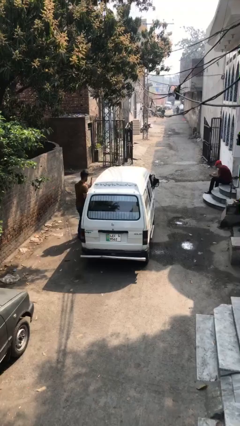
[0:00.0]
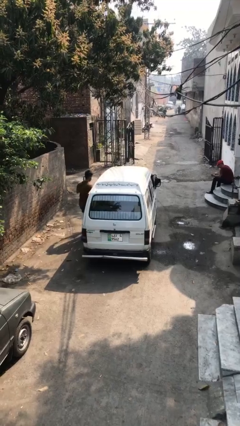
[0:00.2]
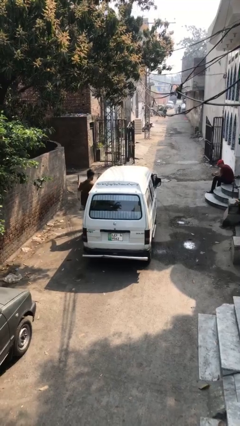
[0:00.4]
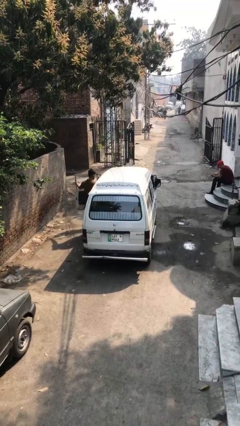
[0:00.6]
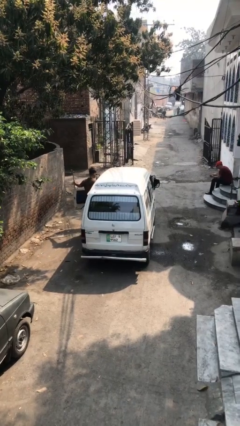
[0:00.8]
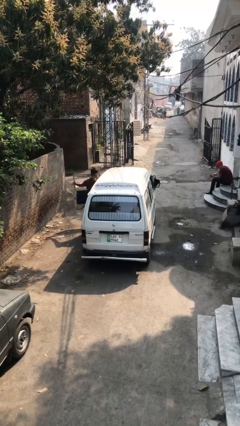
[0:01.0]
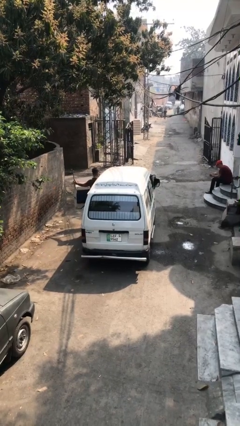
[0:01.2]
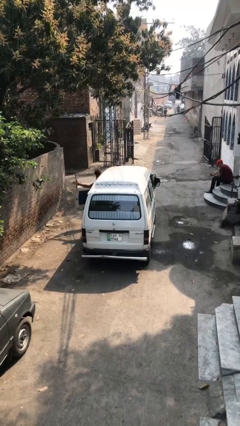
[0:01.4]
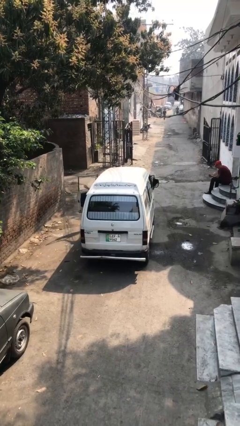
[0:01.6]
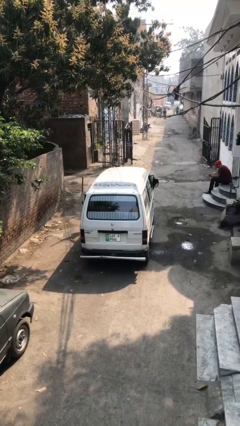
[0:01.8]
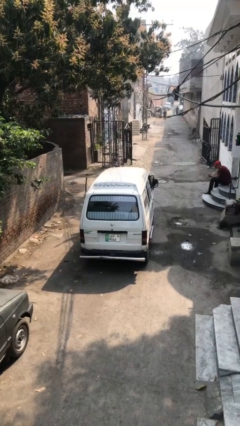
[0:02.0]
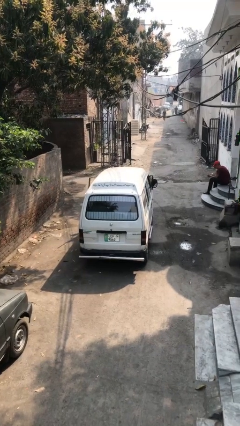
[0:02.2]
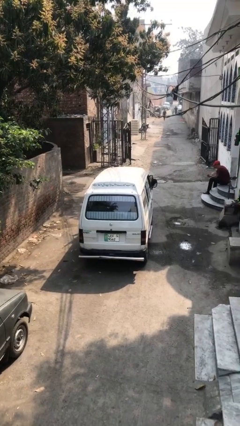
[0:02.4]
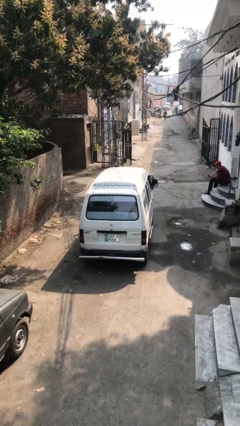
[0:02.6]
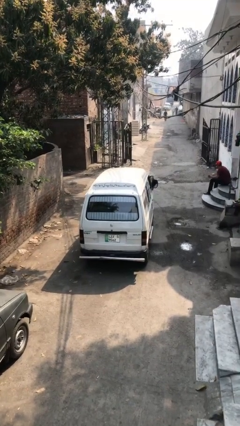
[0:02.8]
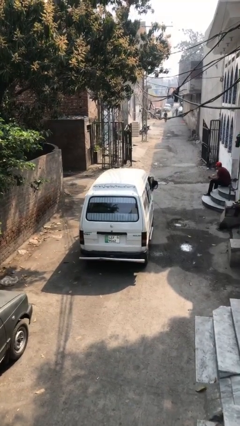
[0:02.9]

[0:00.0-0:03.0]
car picks up person

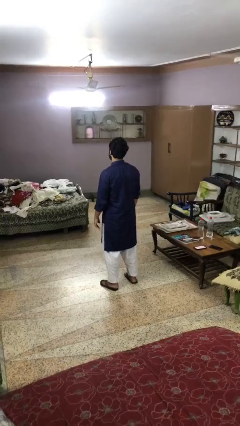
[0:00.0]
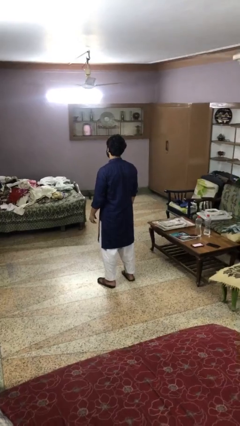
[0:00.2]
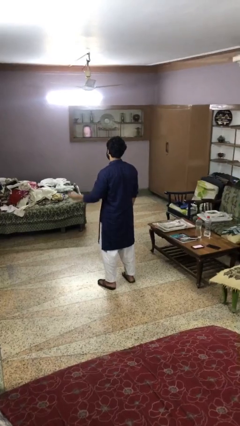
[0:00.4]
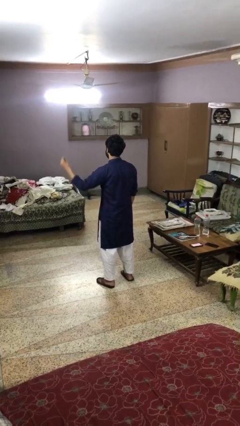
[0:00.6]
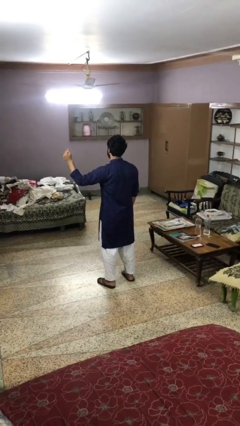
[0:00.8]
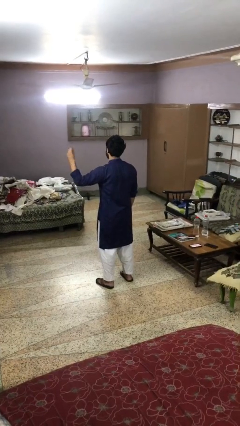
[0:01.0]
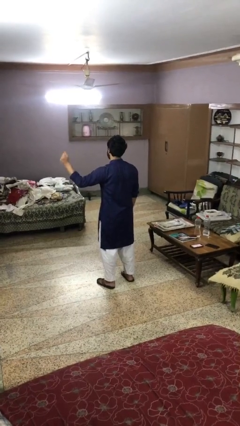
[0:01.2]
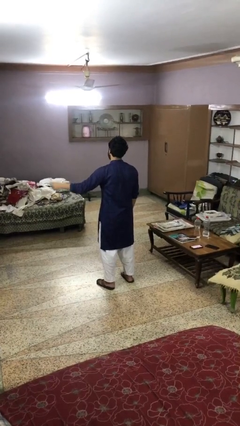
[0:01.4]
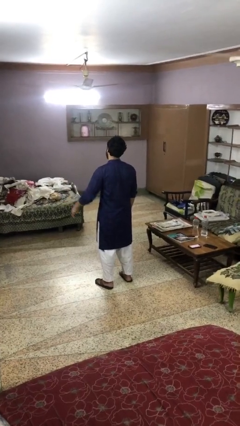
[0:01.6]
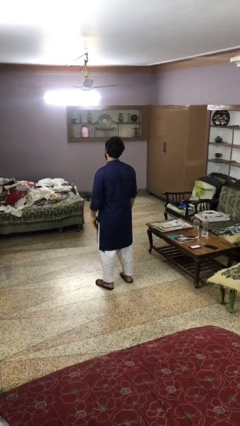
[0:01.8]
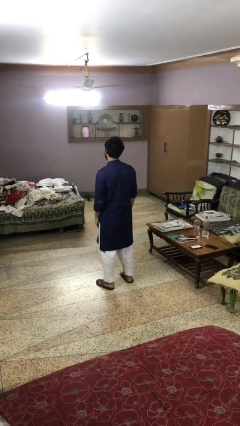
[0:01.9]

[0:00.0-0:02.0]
person snaps fingers

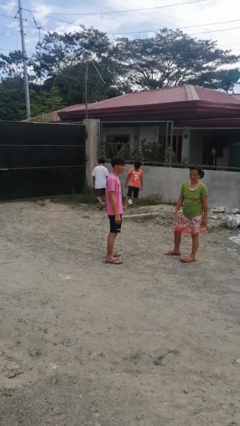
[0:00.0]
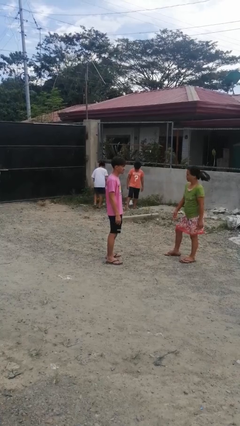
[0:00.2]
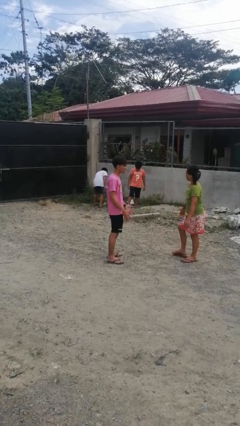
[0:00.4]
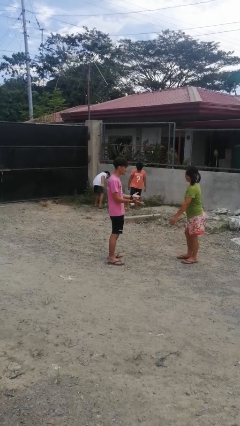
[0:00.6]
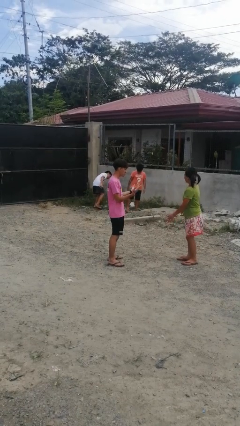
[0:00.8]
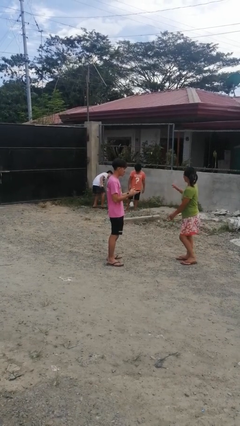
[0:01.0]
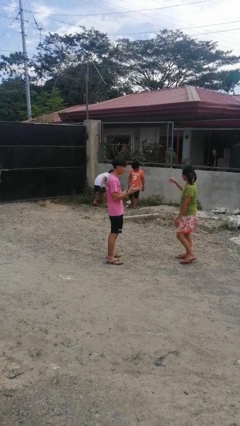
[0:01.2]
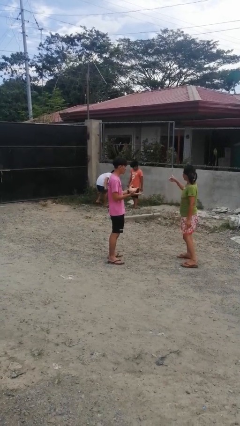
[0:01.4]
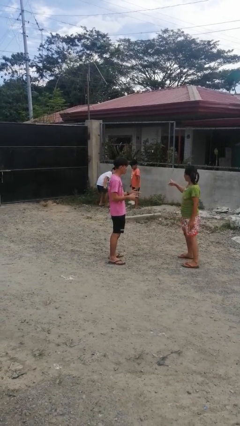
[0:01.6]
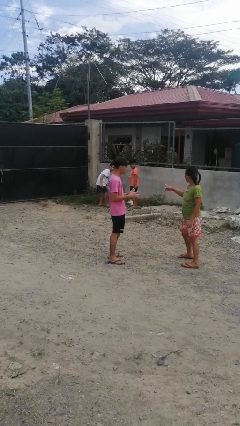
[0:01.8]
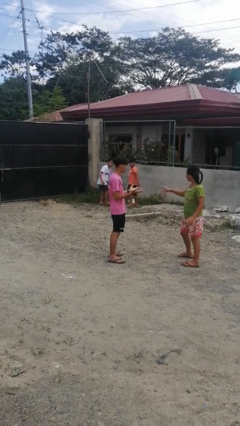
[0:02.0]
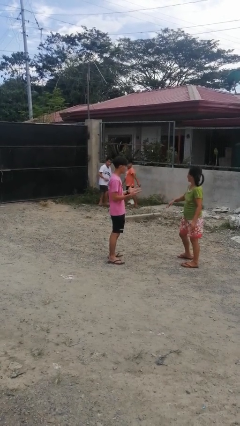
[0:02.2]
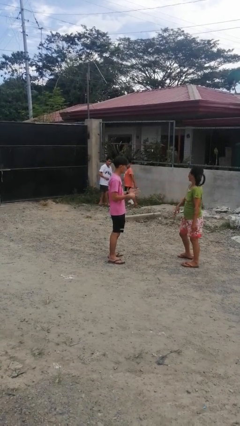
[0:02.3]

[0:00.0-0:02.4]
person talks to person

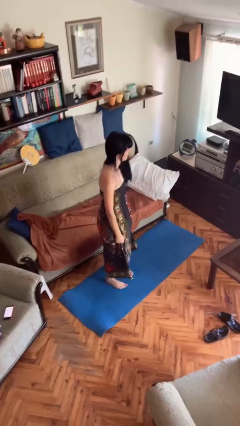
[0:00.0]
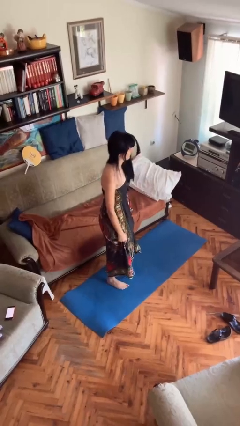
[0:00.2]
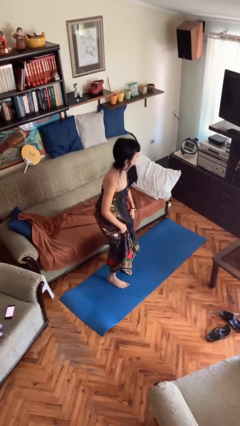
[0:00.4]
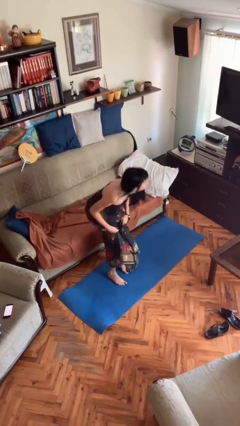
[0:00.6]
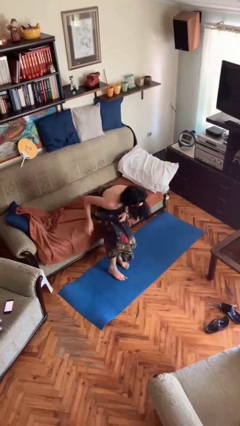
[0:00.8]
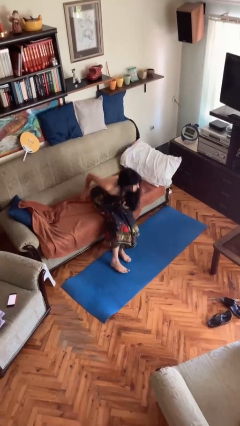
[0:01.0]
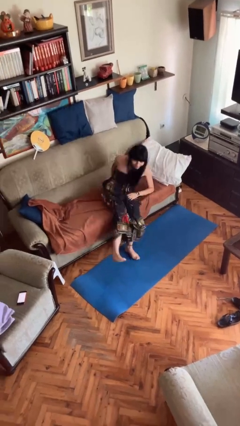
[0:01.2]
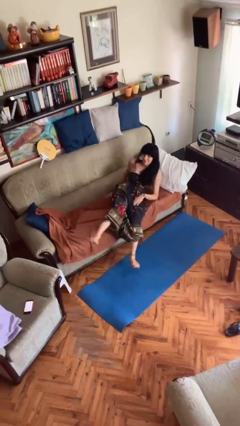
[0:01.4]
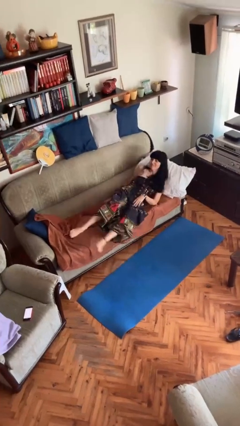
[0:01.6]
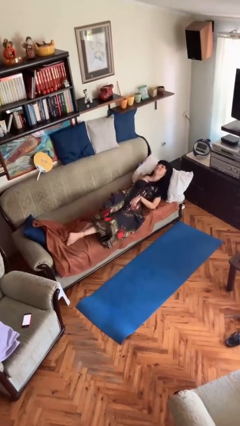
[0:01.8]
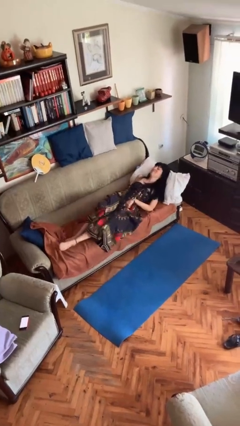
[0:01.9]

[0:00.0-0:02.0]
person lies down on bed

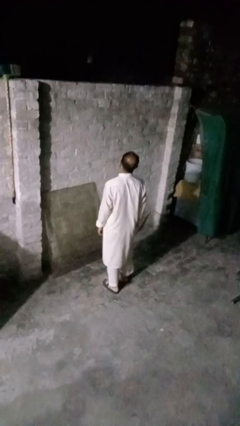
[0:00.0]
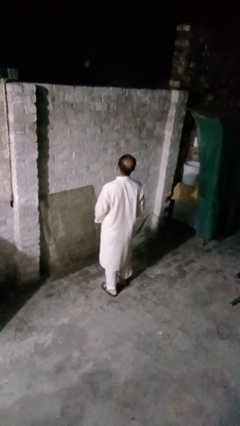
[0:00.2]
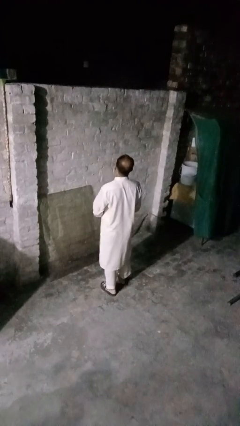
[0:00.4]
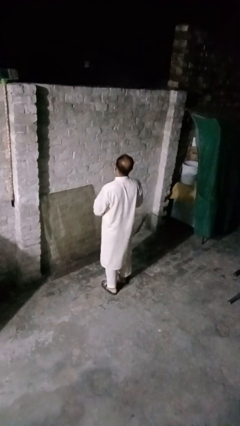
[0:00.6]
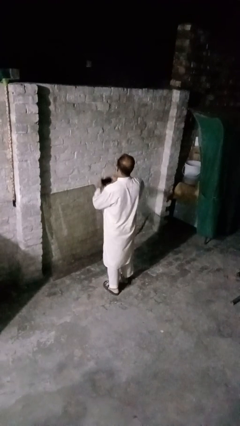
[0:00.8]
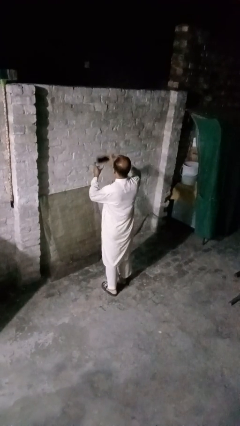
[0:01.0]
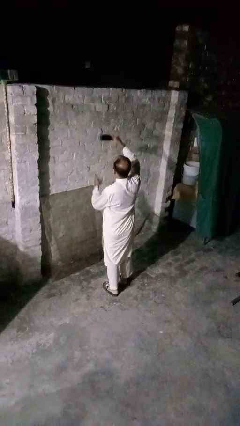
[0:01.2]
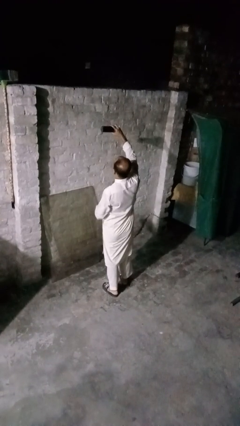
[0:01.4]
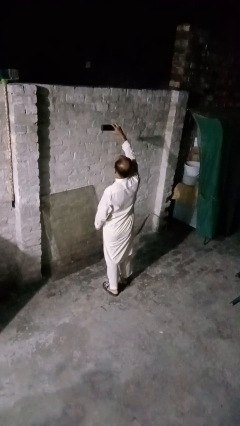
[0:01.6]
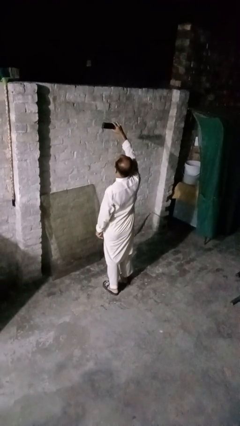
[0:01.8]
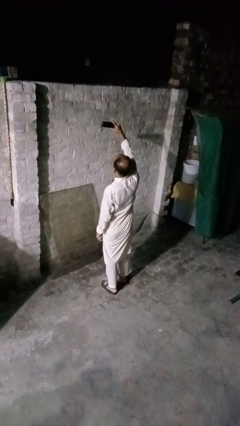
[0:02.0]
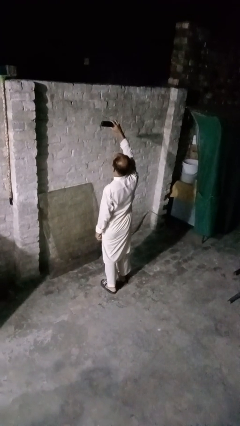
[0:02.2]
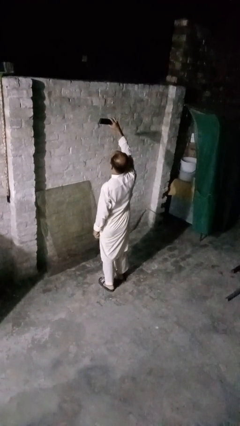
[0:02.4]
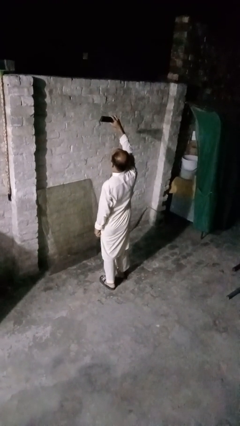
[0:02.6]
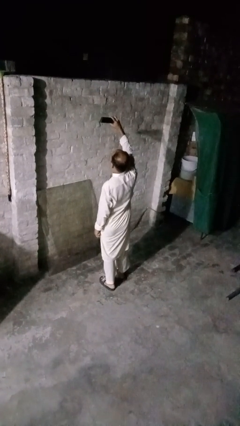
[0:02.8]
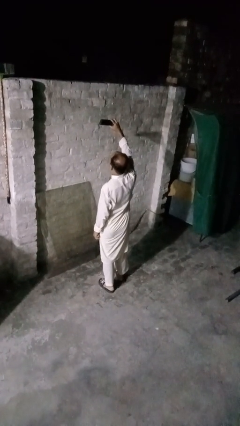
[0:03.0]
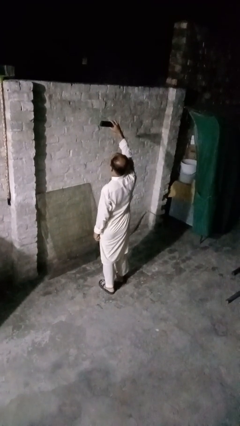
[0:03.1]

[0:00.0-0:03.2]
person takes selfie

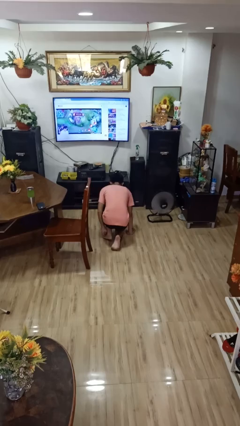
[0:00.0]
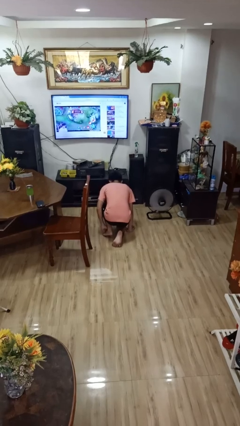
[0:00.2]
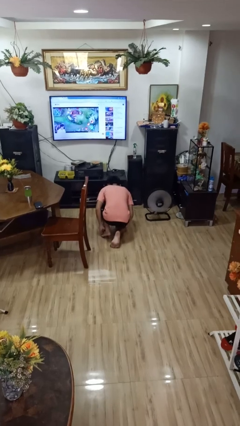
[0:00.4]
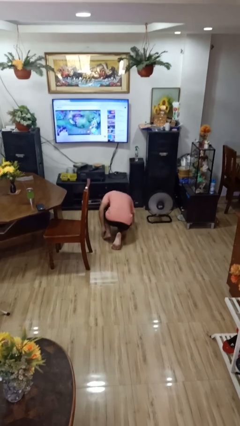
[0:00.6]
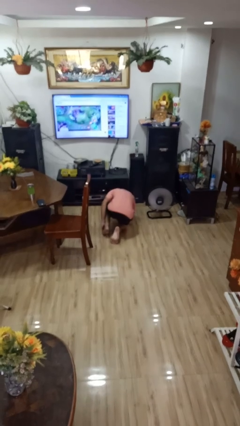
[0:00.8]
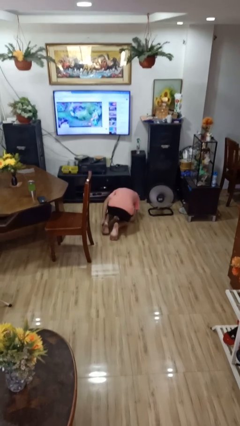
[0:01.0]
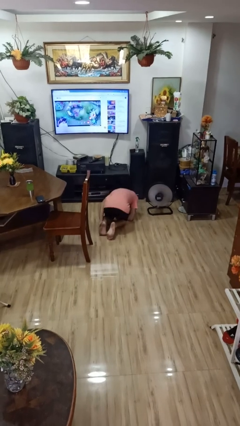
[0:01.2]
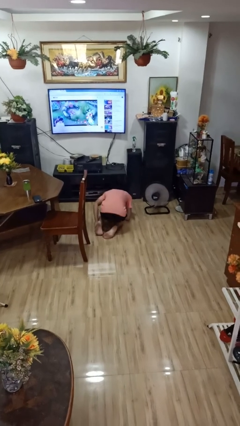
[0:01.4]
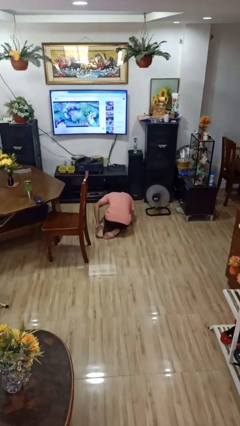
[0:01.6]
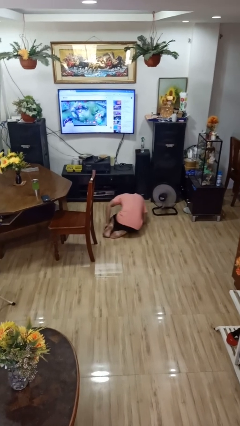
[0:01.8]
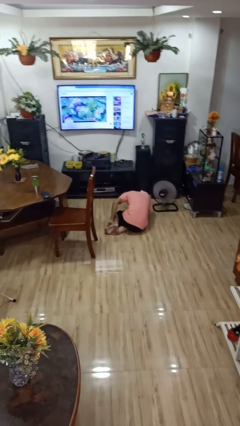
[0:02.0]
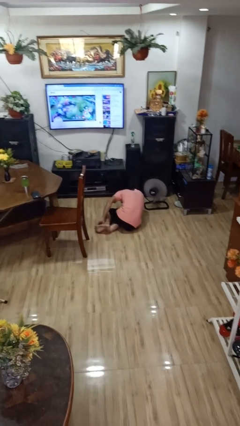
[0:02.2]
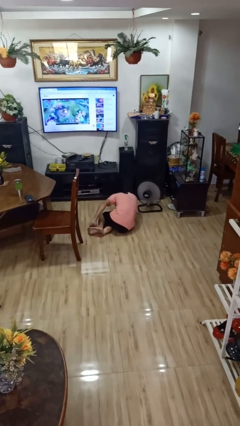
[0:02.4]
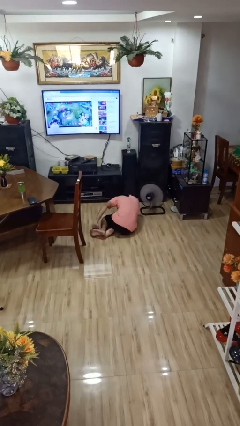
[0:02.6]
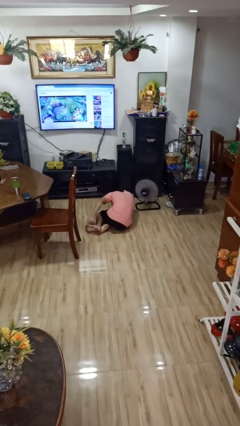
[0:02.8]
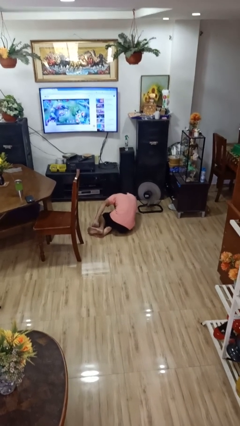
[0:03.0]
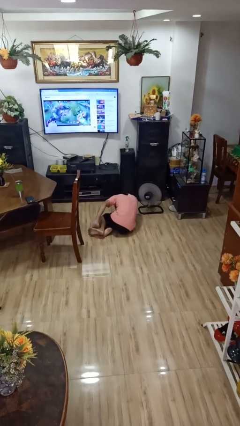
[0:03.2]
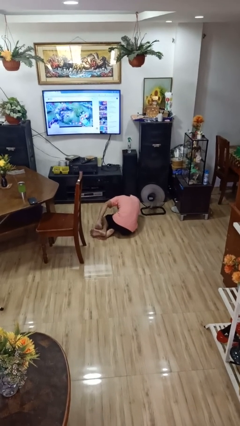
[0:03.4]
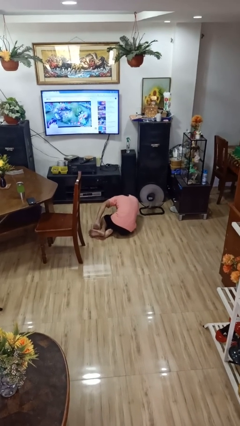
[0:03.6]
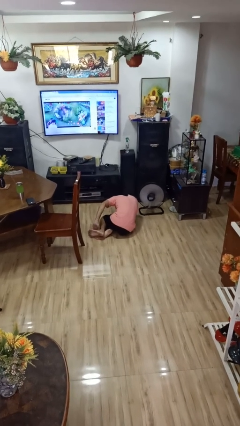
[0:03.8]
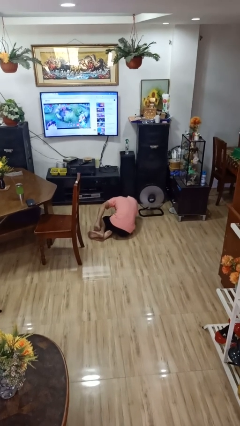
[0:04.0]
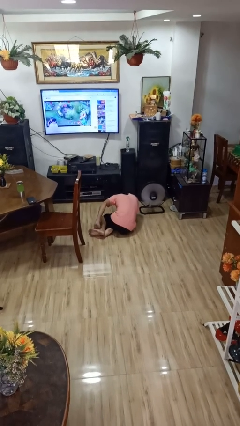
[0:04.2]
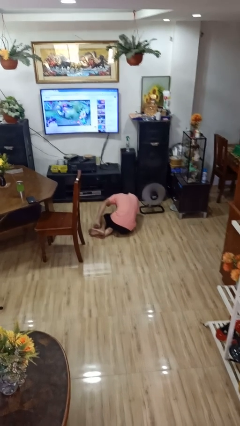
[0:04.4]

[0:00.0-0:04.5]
person lies down on floor
